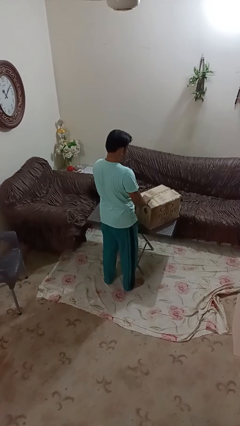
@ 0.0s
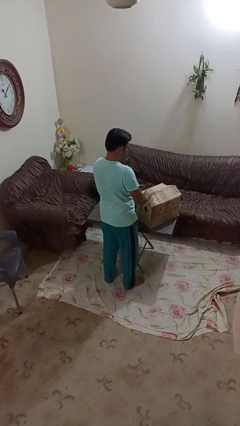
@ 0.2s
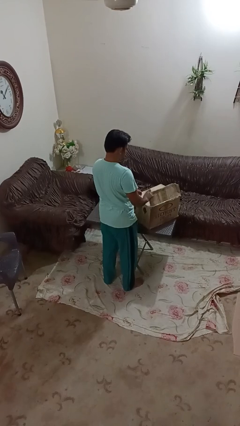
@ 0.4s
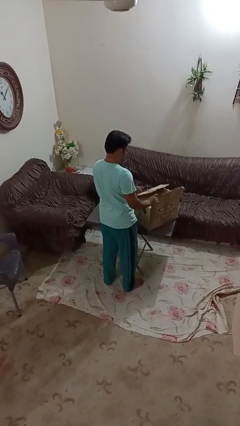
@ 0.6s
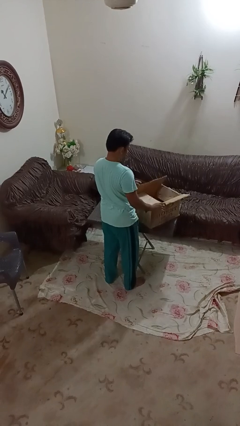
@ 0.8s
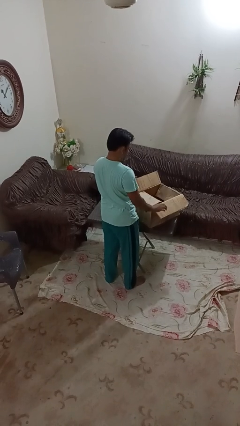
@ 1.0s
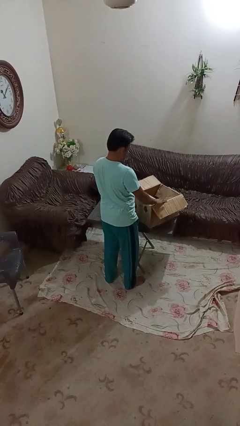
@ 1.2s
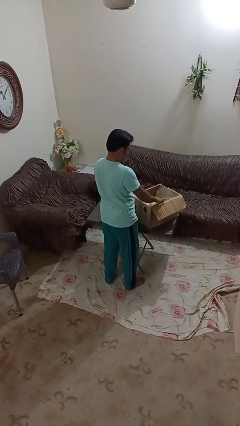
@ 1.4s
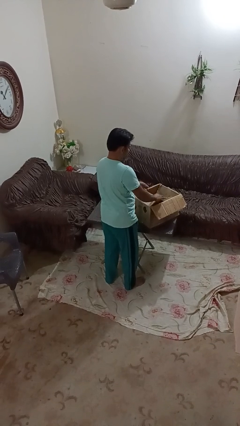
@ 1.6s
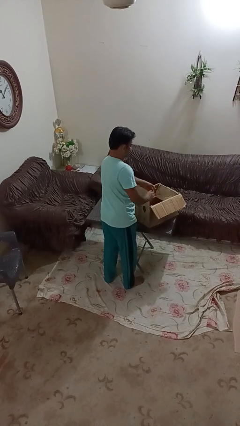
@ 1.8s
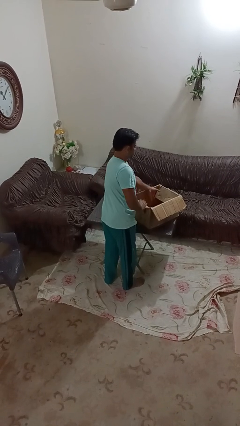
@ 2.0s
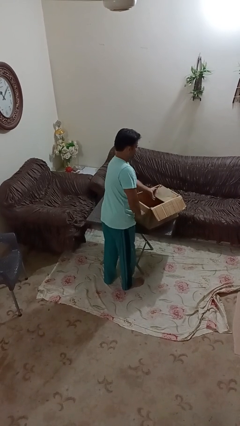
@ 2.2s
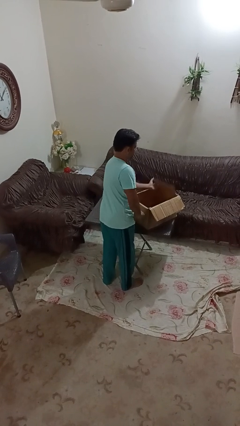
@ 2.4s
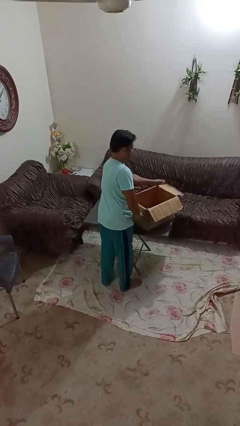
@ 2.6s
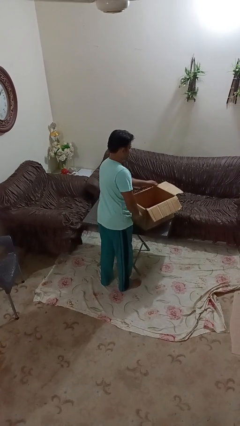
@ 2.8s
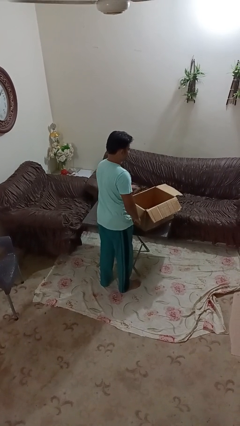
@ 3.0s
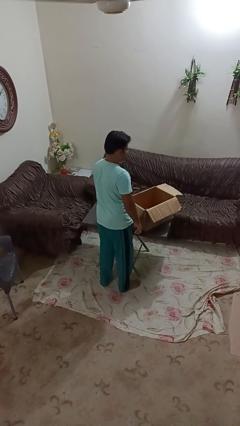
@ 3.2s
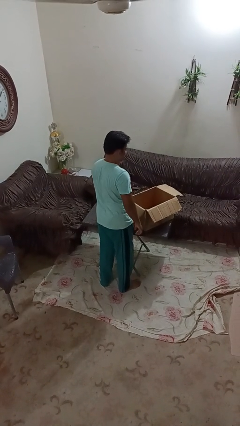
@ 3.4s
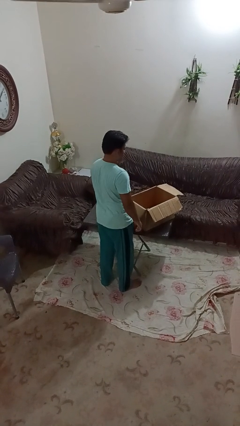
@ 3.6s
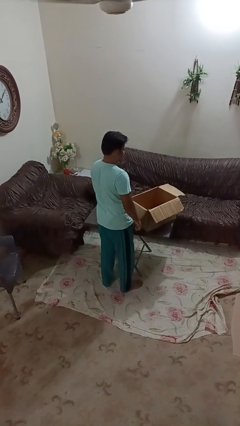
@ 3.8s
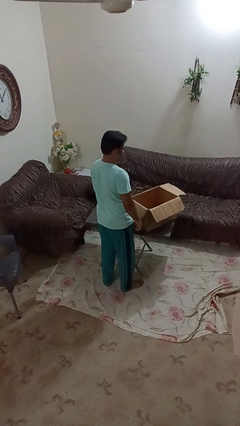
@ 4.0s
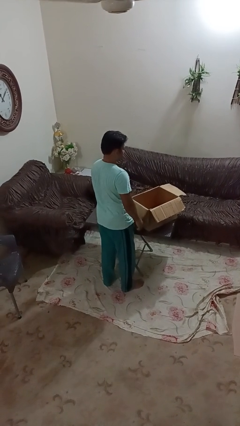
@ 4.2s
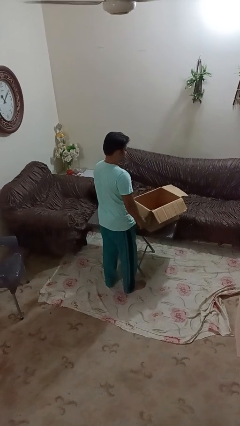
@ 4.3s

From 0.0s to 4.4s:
person opens box

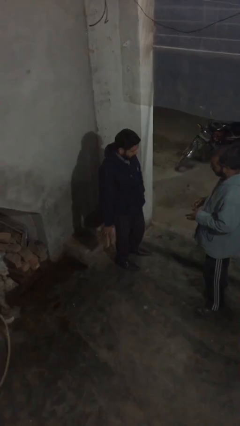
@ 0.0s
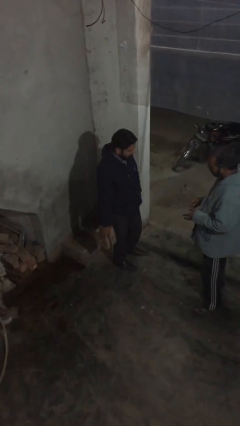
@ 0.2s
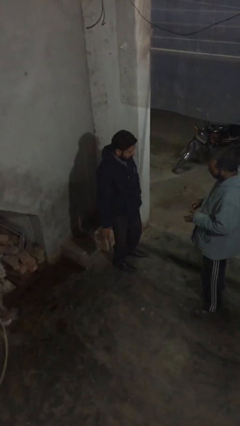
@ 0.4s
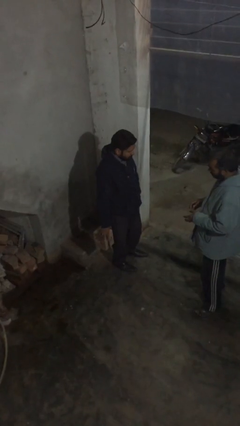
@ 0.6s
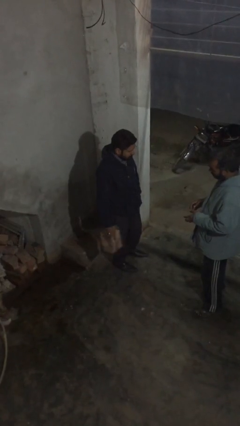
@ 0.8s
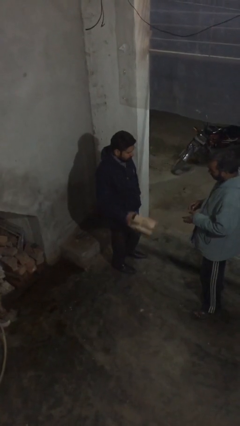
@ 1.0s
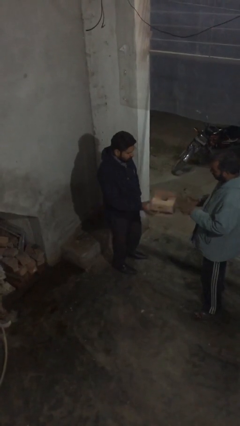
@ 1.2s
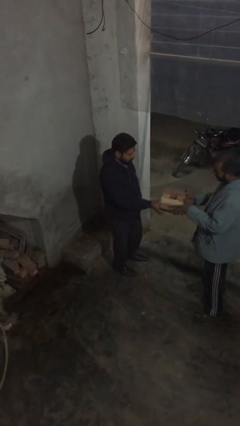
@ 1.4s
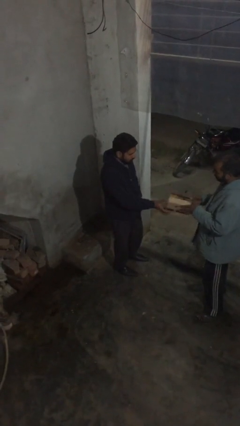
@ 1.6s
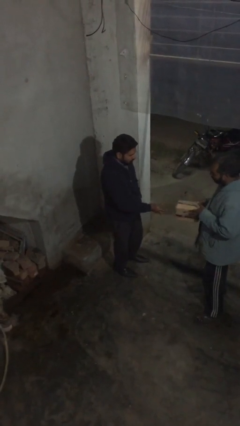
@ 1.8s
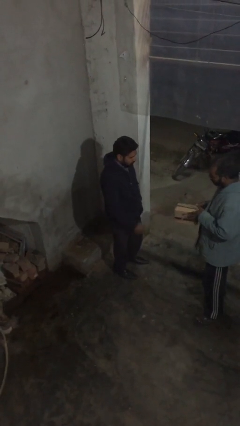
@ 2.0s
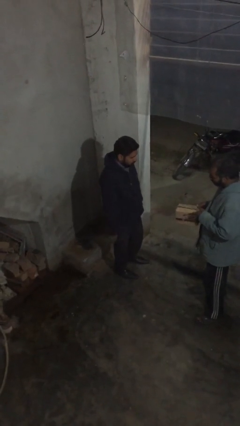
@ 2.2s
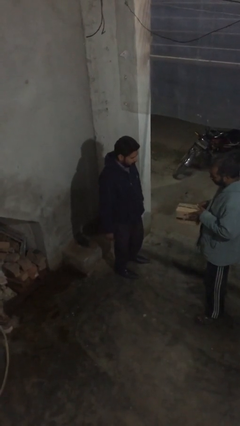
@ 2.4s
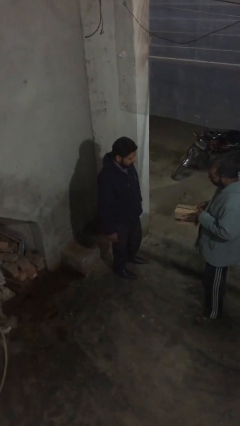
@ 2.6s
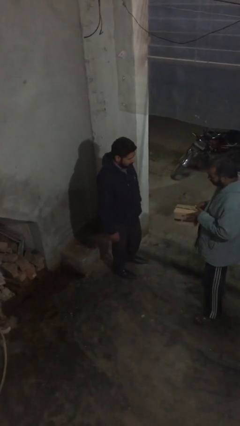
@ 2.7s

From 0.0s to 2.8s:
person transfers object to person

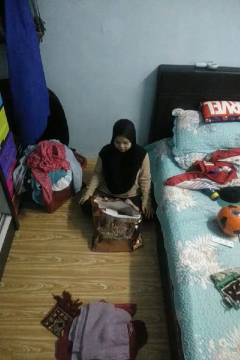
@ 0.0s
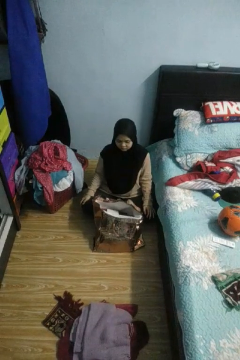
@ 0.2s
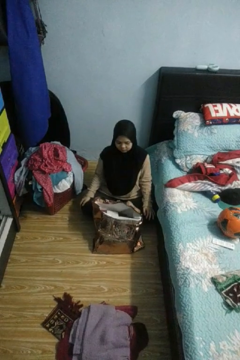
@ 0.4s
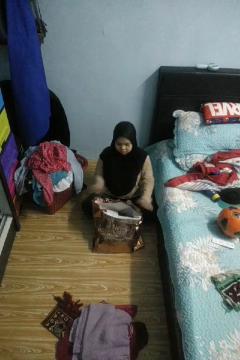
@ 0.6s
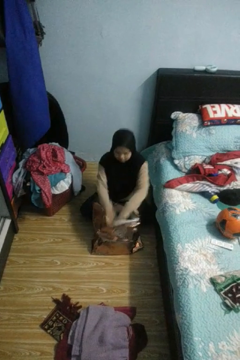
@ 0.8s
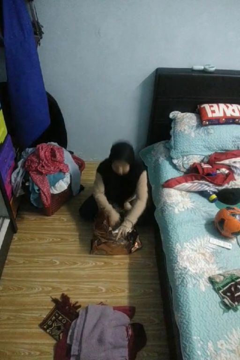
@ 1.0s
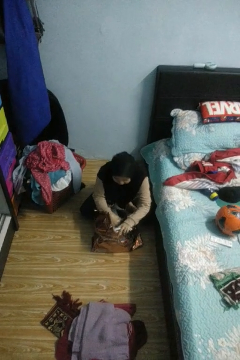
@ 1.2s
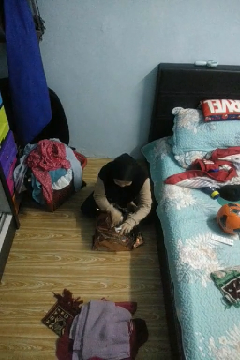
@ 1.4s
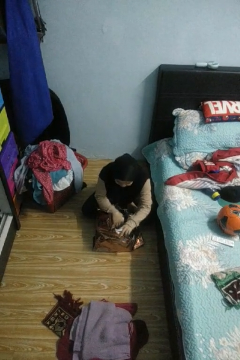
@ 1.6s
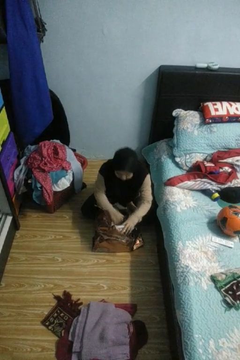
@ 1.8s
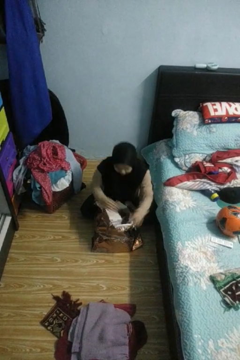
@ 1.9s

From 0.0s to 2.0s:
person searches in bag

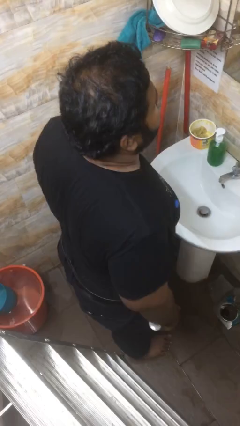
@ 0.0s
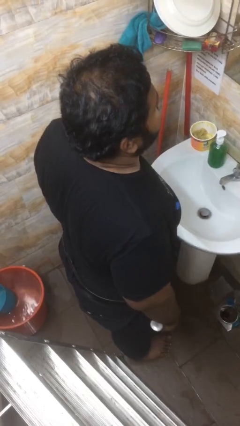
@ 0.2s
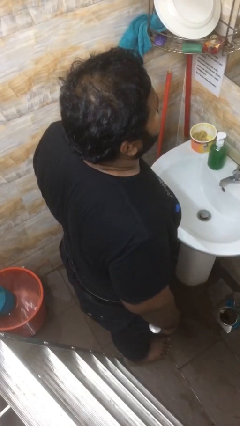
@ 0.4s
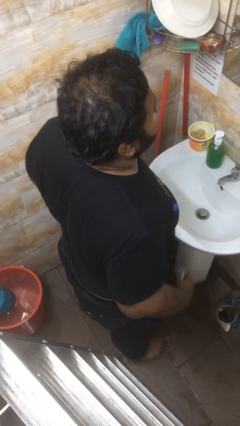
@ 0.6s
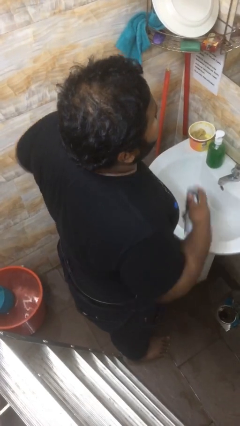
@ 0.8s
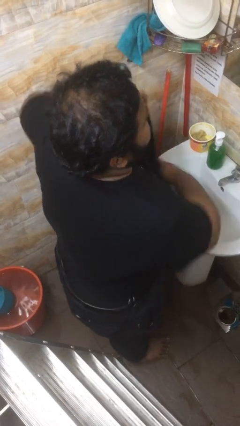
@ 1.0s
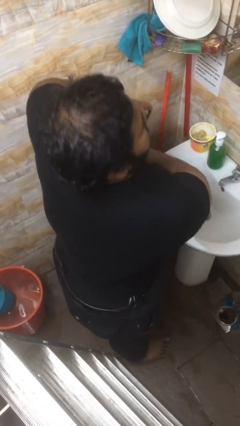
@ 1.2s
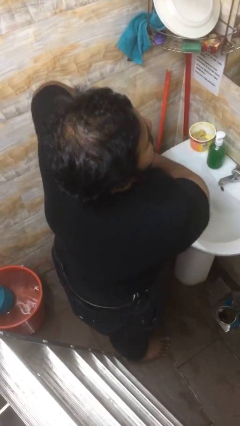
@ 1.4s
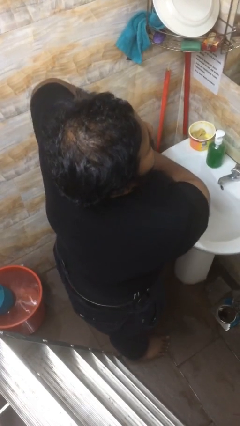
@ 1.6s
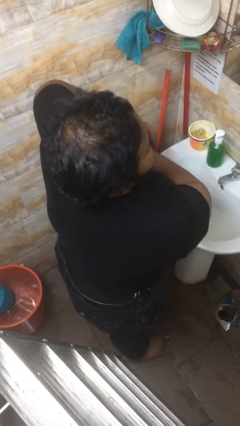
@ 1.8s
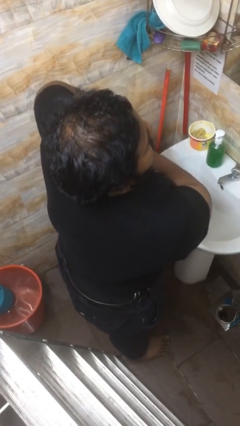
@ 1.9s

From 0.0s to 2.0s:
person applies deodorant

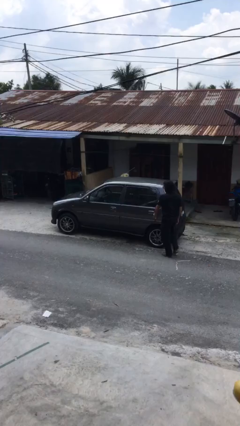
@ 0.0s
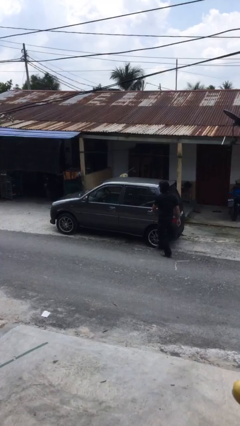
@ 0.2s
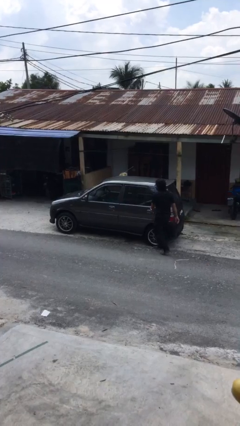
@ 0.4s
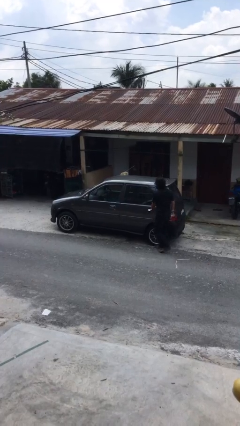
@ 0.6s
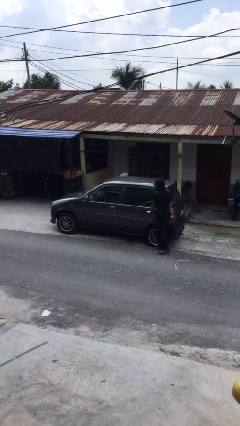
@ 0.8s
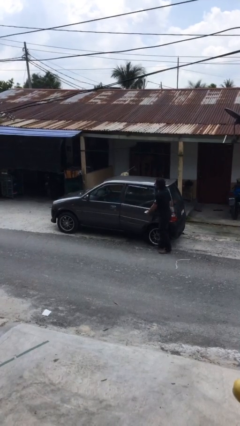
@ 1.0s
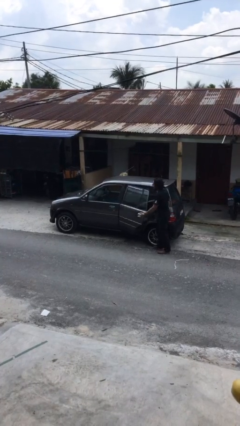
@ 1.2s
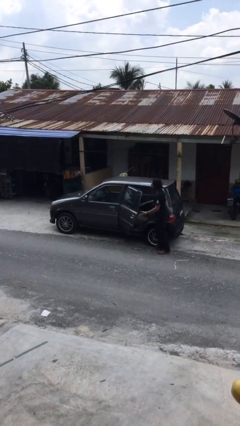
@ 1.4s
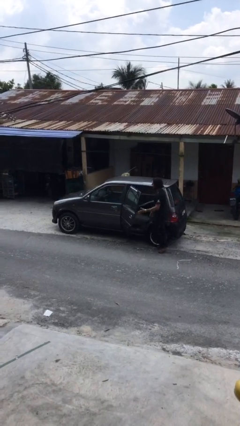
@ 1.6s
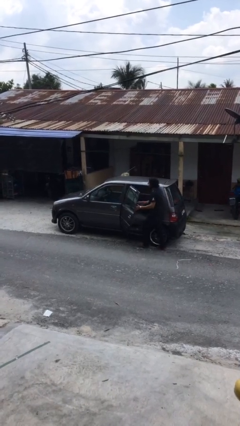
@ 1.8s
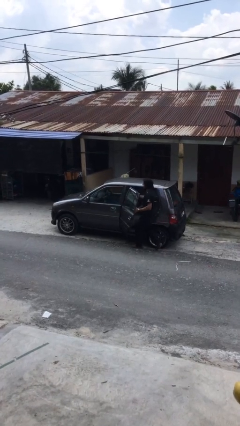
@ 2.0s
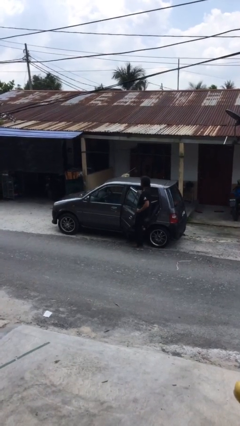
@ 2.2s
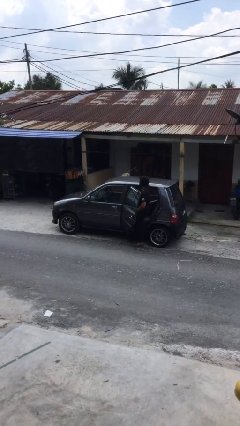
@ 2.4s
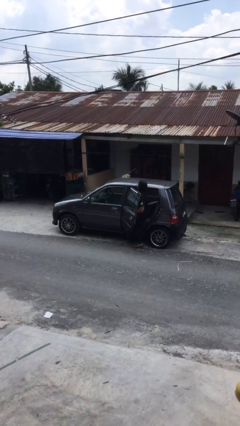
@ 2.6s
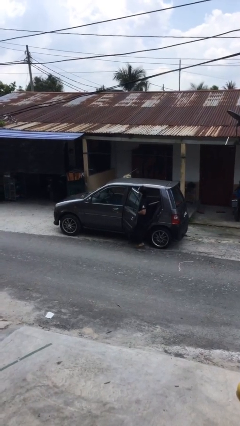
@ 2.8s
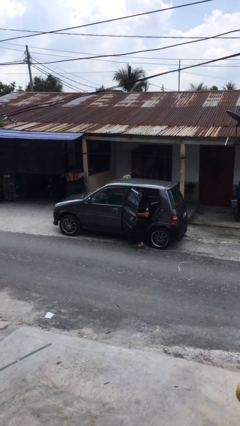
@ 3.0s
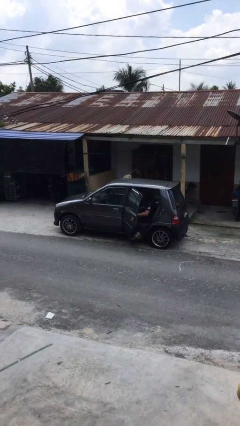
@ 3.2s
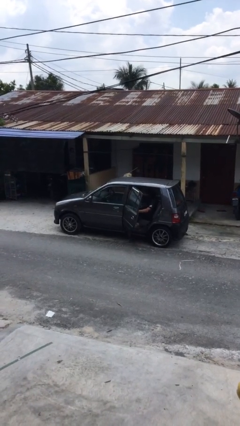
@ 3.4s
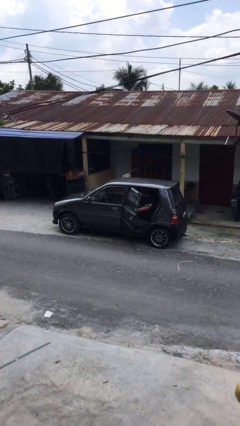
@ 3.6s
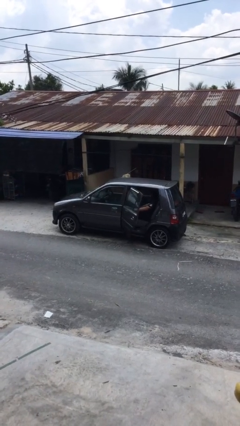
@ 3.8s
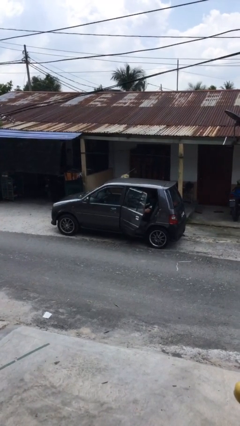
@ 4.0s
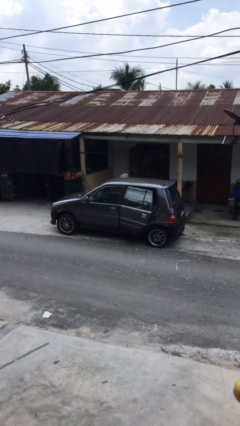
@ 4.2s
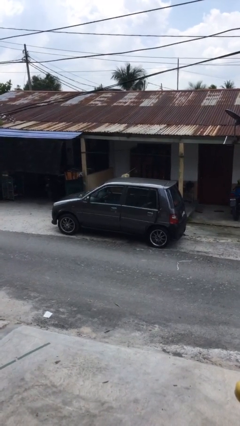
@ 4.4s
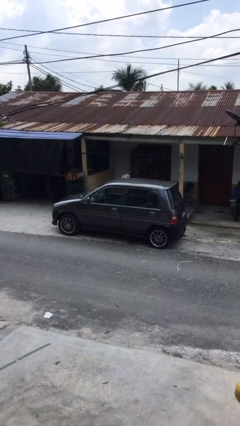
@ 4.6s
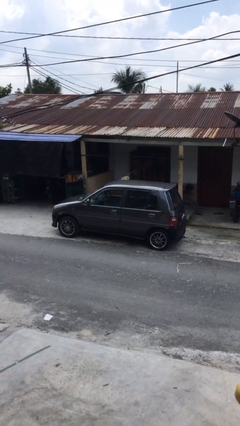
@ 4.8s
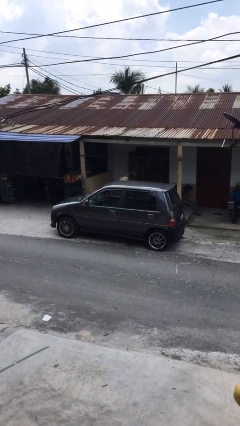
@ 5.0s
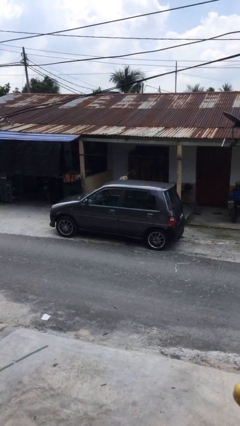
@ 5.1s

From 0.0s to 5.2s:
car picks up person

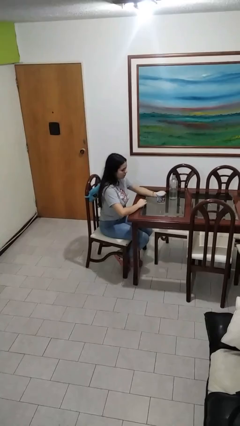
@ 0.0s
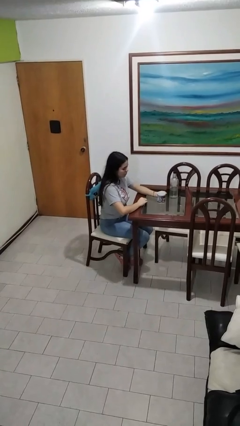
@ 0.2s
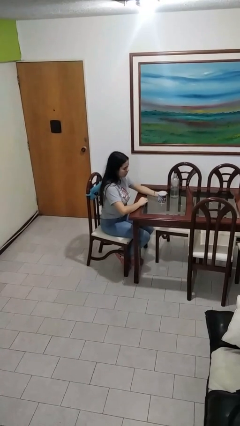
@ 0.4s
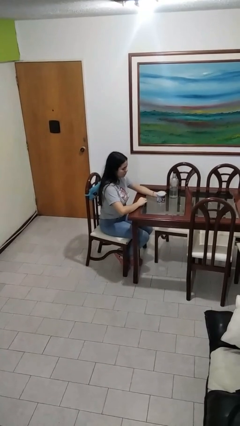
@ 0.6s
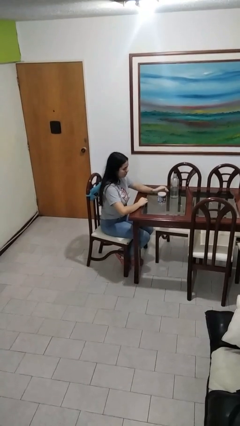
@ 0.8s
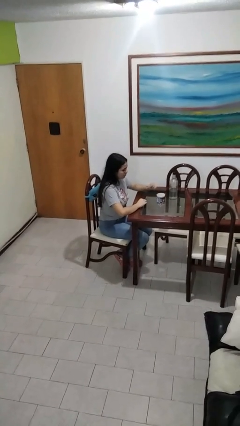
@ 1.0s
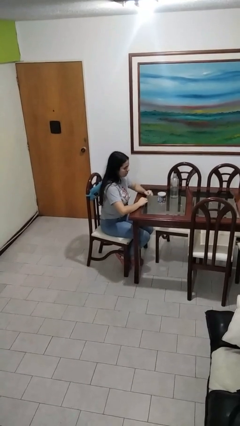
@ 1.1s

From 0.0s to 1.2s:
person puts down object on table
